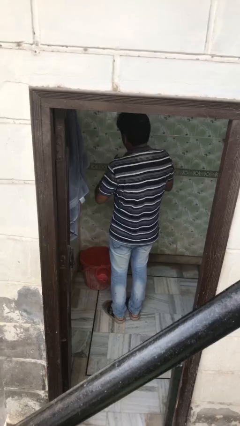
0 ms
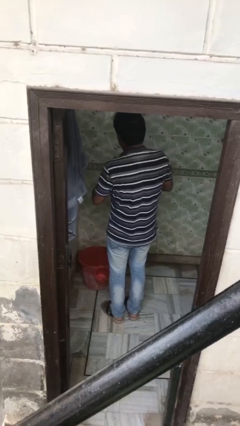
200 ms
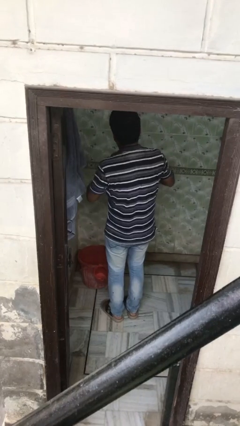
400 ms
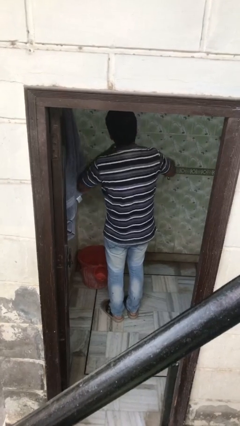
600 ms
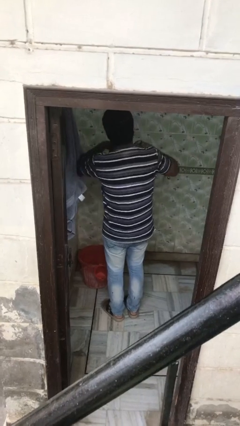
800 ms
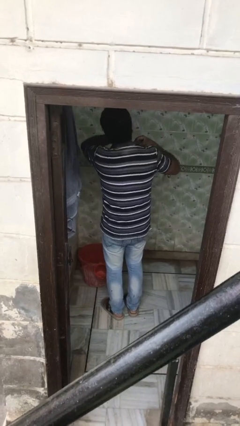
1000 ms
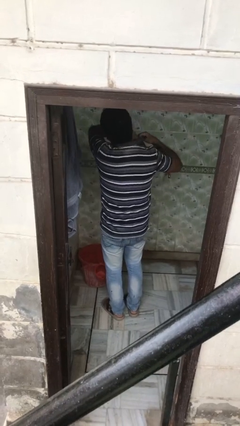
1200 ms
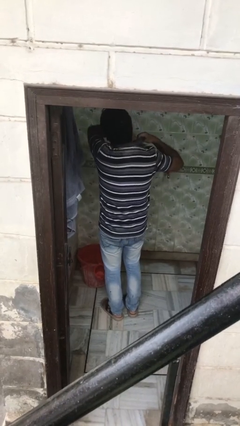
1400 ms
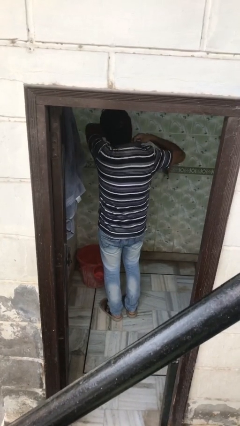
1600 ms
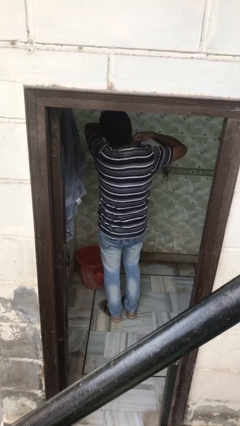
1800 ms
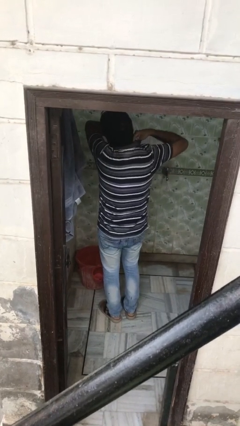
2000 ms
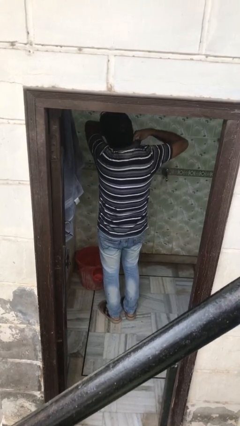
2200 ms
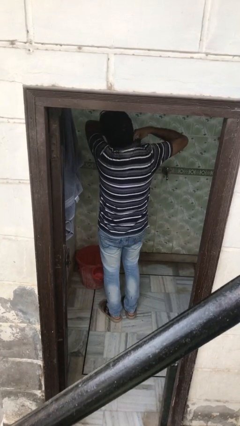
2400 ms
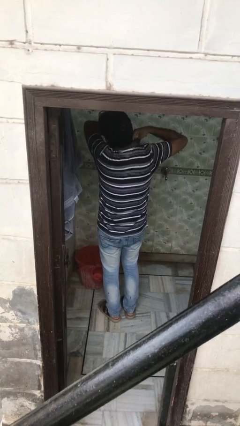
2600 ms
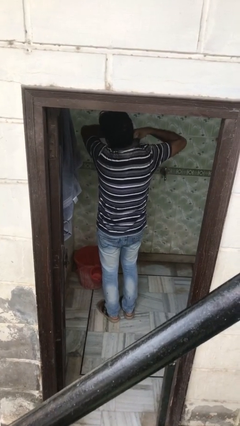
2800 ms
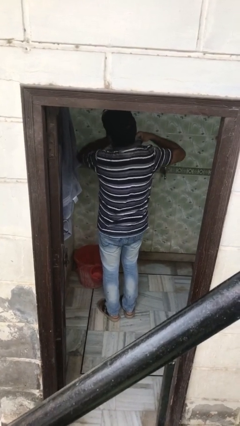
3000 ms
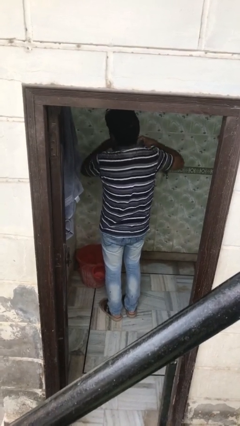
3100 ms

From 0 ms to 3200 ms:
person applies deodorant

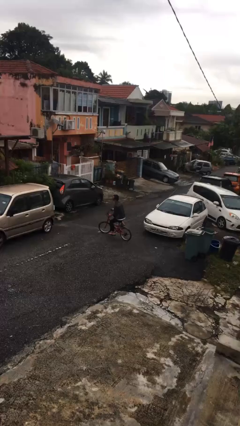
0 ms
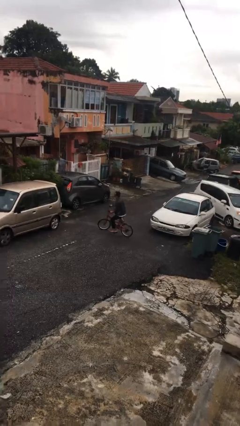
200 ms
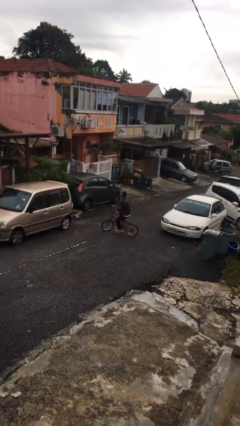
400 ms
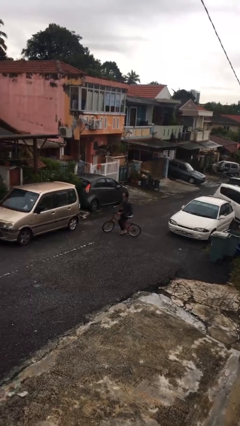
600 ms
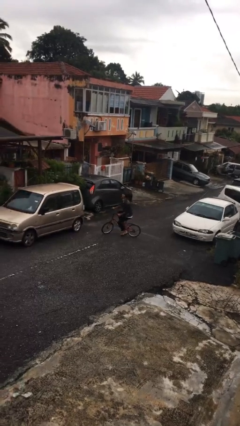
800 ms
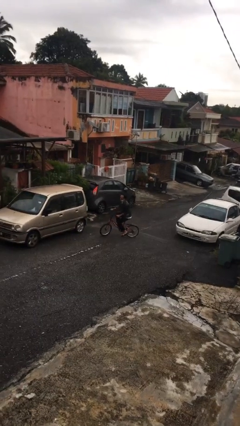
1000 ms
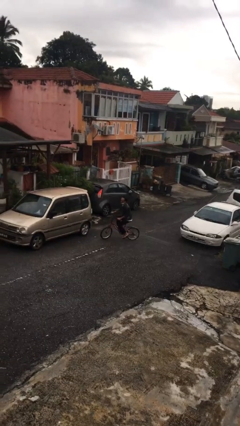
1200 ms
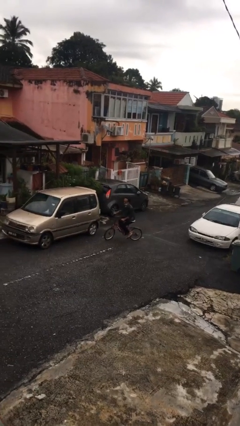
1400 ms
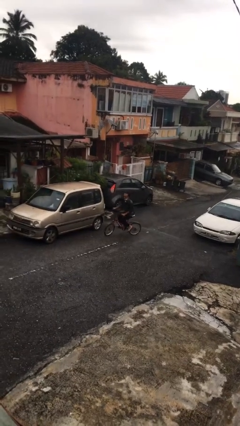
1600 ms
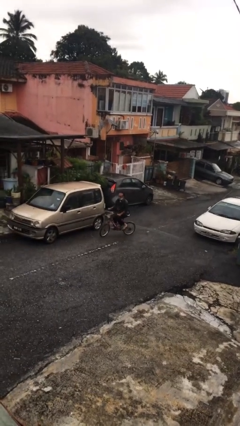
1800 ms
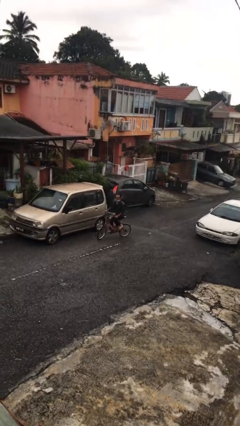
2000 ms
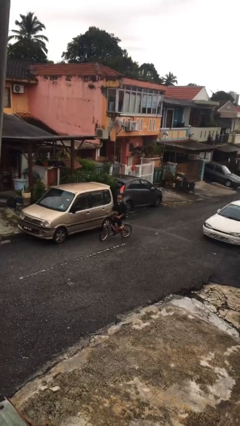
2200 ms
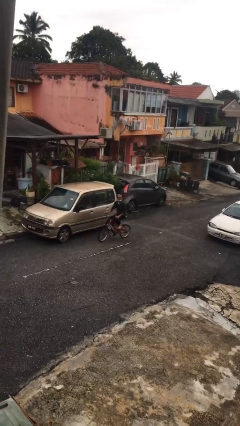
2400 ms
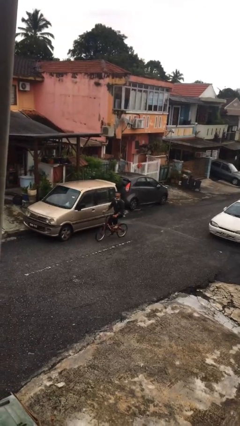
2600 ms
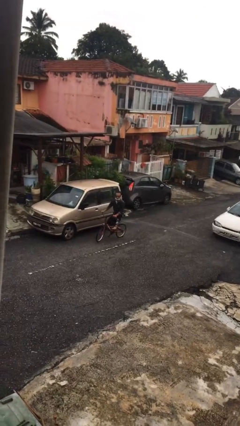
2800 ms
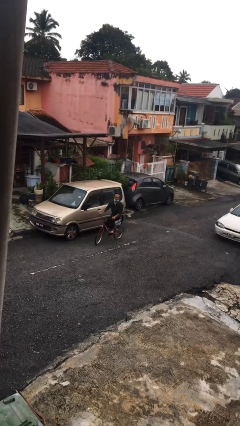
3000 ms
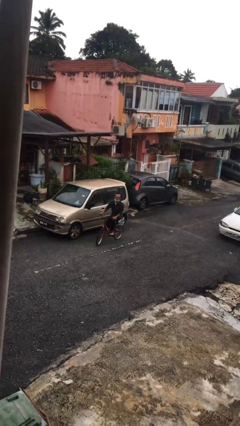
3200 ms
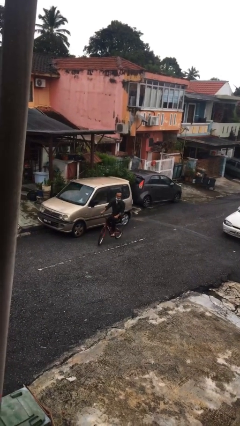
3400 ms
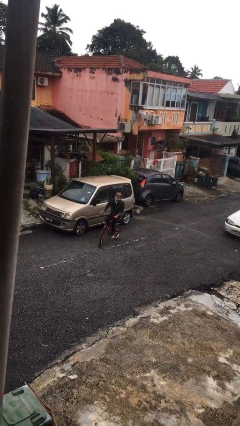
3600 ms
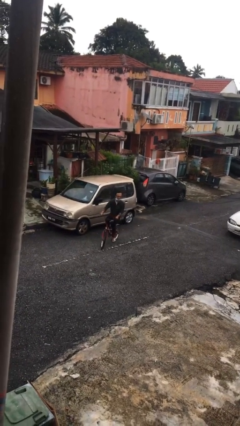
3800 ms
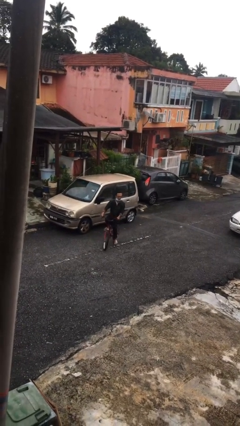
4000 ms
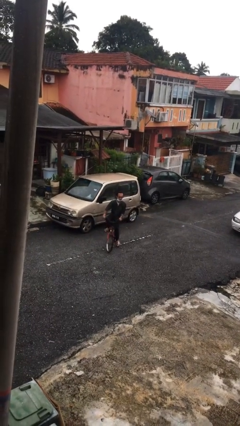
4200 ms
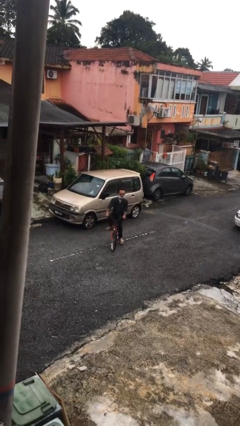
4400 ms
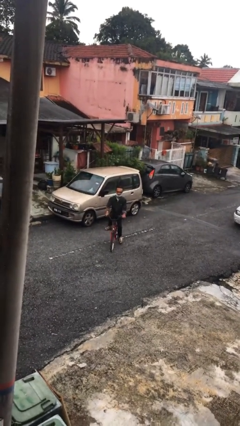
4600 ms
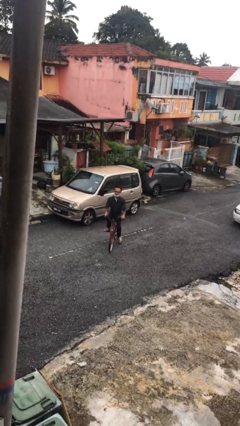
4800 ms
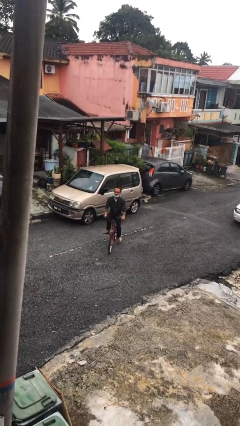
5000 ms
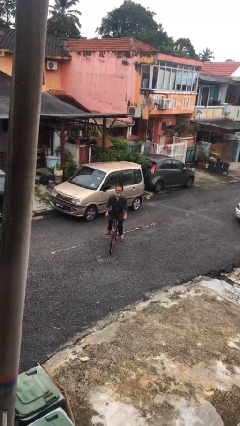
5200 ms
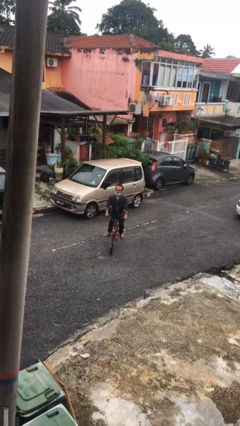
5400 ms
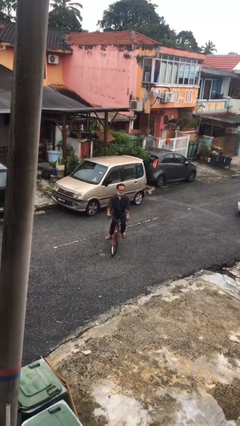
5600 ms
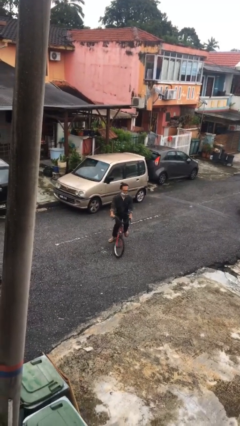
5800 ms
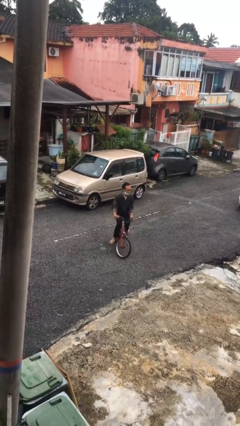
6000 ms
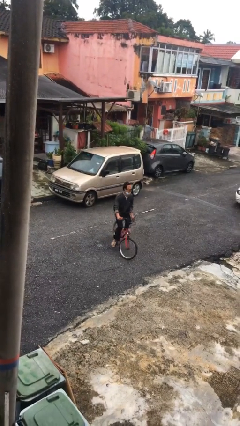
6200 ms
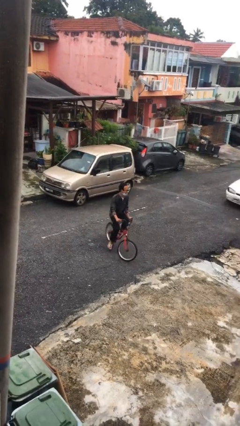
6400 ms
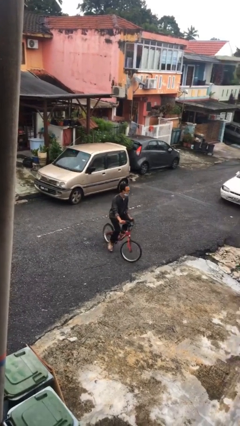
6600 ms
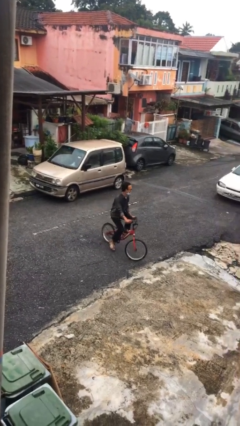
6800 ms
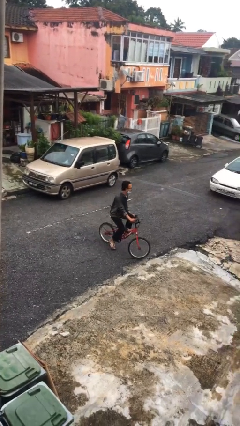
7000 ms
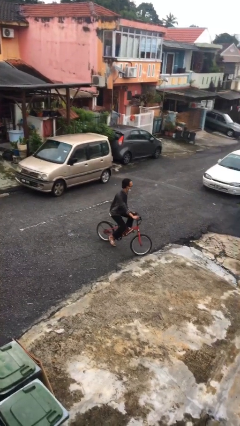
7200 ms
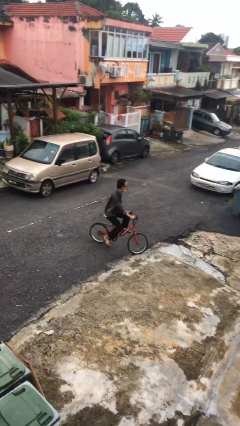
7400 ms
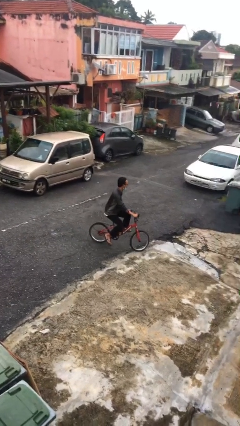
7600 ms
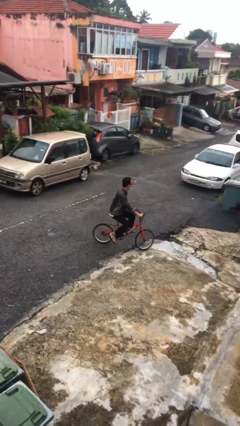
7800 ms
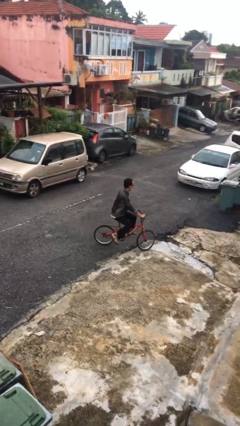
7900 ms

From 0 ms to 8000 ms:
person rides bicycle

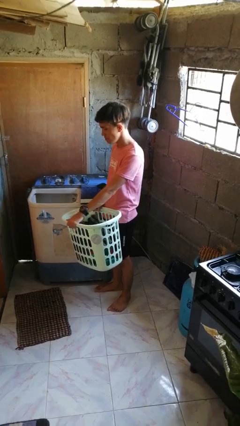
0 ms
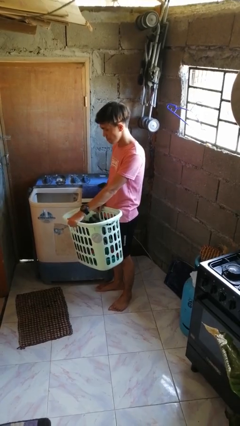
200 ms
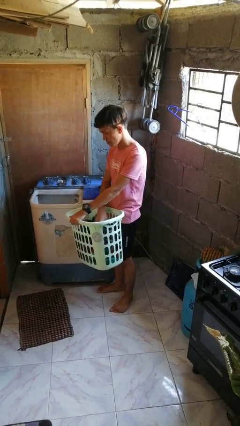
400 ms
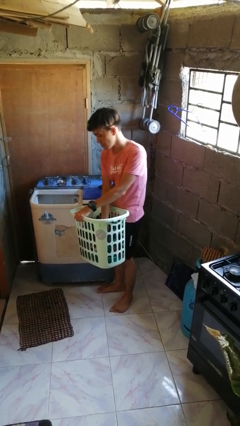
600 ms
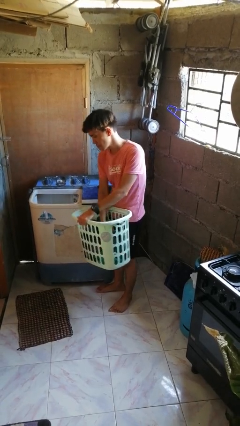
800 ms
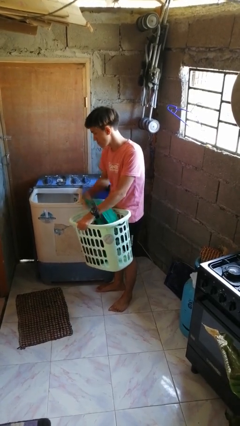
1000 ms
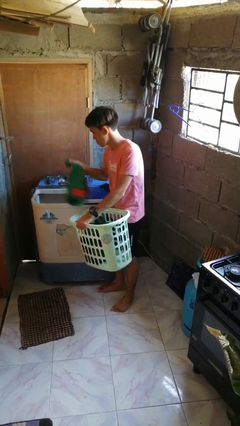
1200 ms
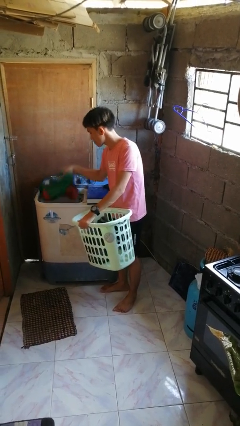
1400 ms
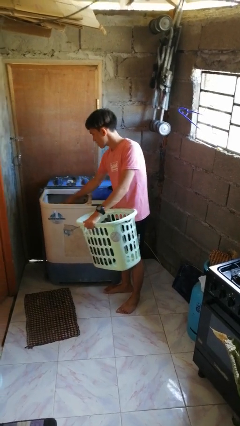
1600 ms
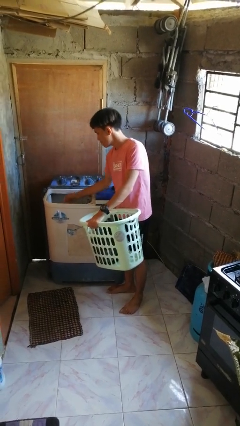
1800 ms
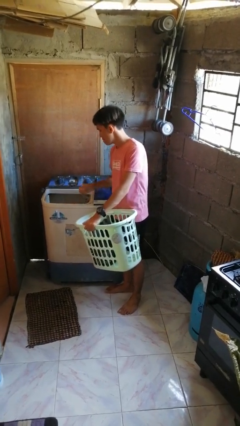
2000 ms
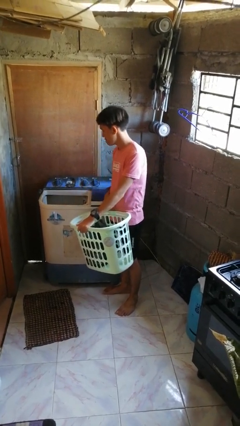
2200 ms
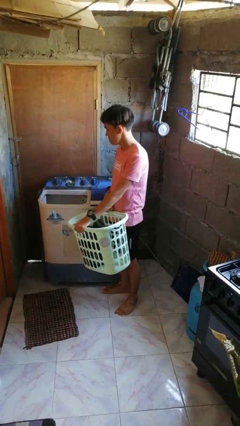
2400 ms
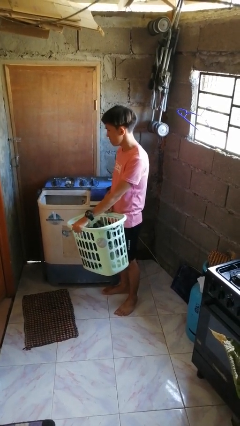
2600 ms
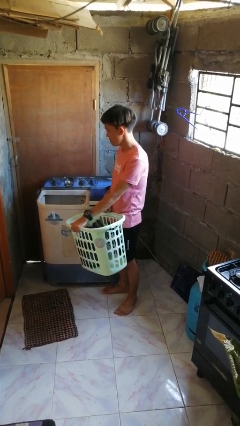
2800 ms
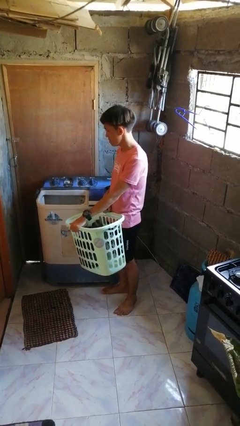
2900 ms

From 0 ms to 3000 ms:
person loads clotheswasher

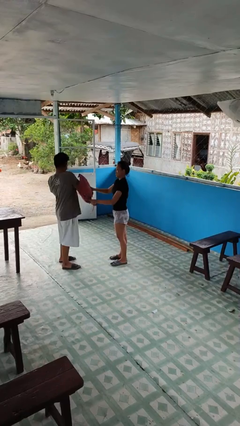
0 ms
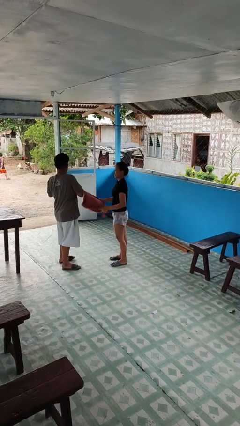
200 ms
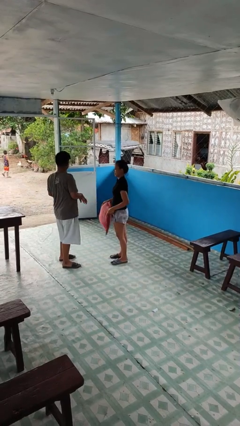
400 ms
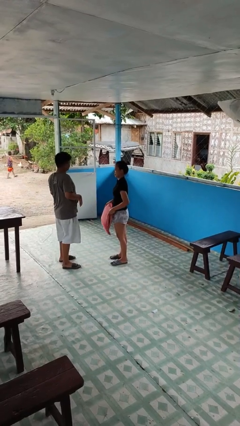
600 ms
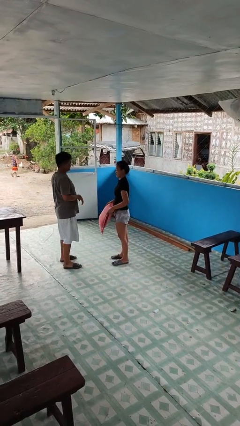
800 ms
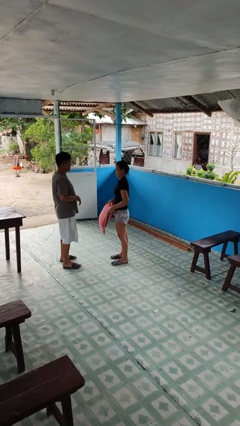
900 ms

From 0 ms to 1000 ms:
person hits person with pillow

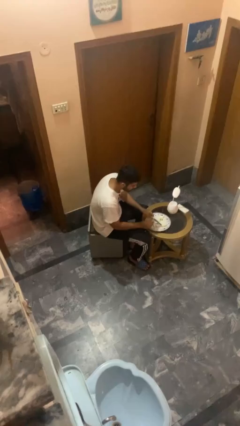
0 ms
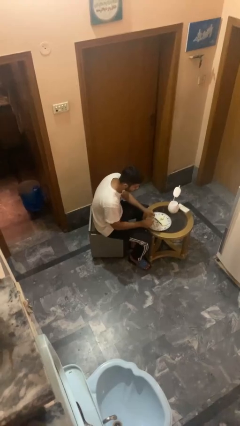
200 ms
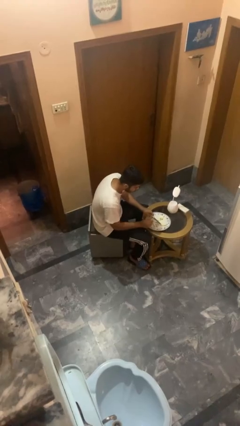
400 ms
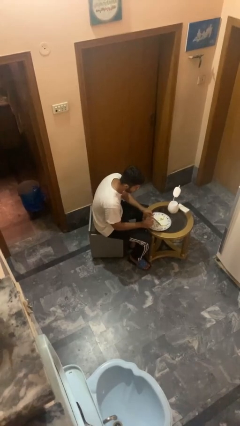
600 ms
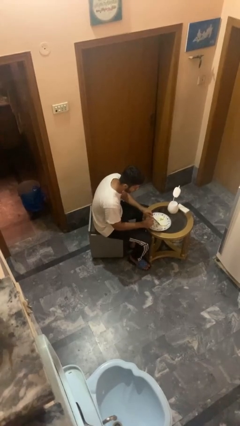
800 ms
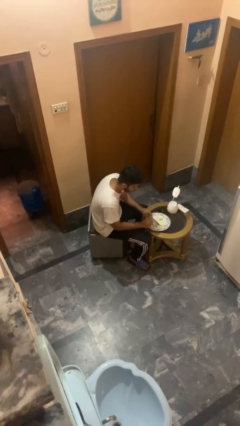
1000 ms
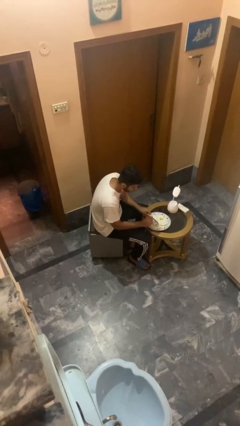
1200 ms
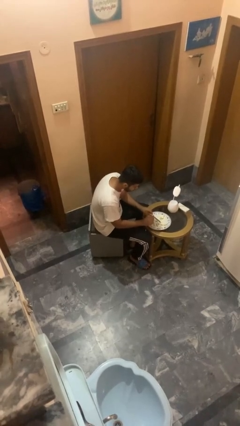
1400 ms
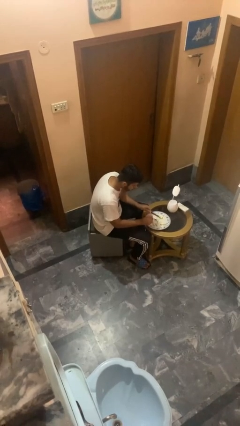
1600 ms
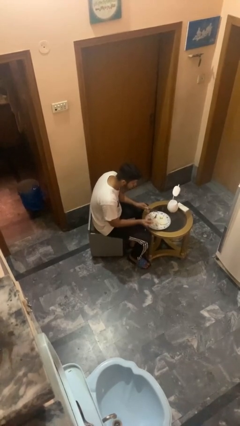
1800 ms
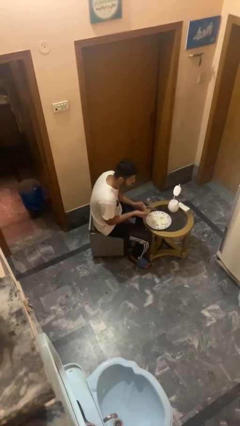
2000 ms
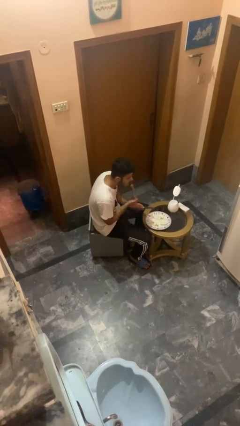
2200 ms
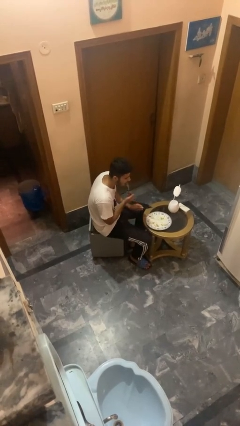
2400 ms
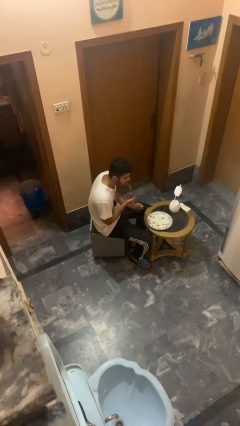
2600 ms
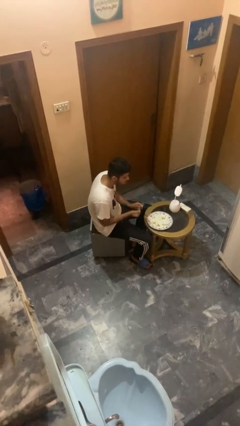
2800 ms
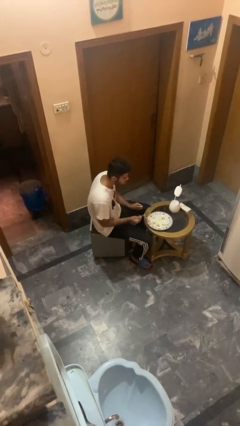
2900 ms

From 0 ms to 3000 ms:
person eats with utensil
